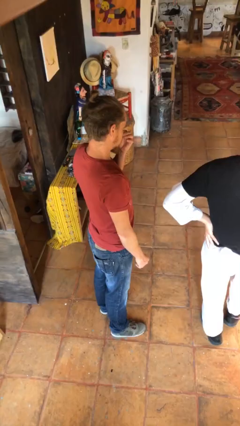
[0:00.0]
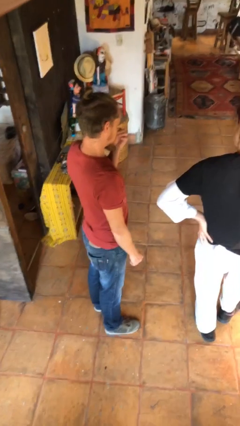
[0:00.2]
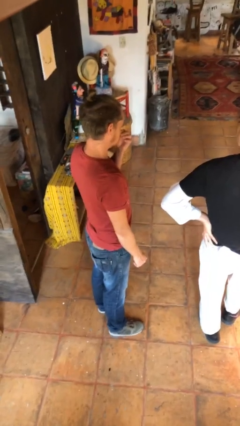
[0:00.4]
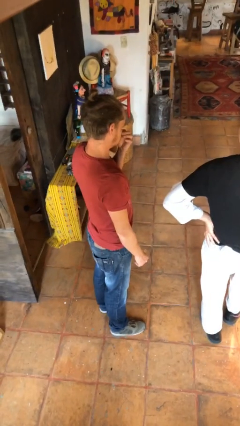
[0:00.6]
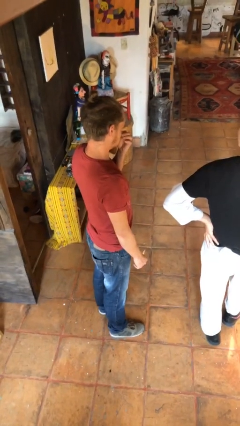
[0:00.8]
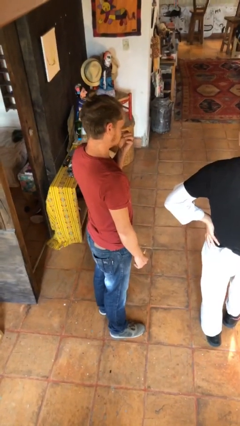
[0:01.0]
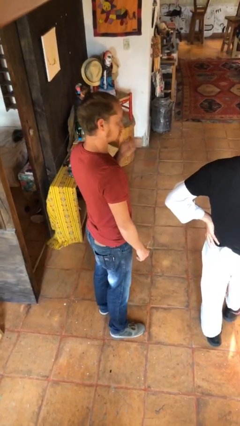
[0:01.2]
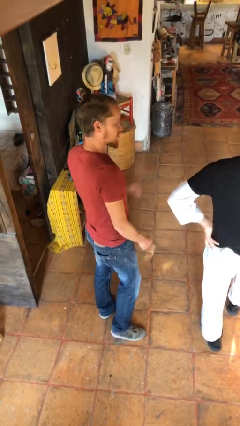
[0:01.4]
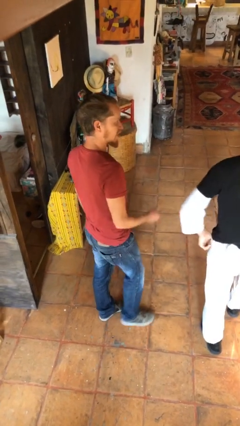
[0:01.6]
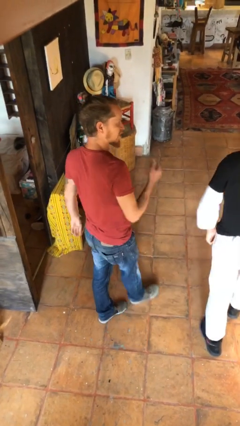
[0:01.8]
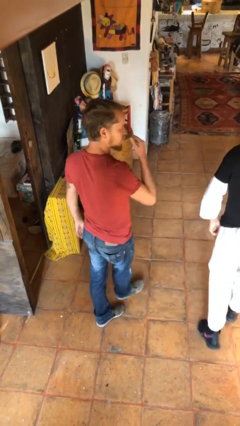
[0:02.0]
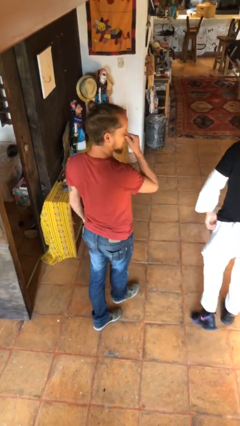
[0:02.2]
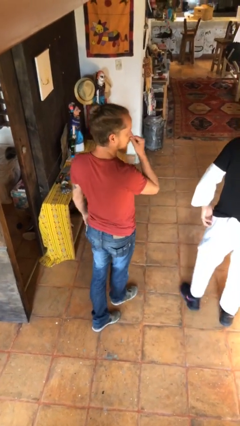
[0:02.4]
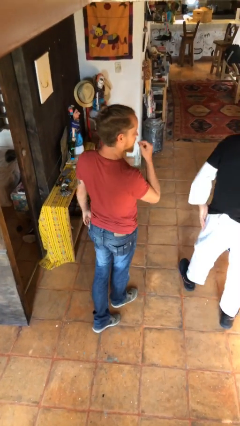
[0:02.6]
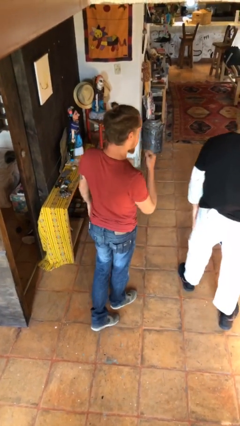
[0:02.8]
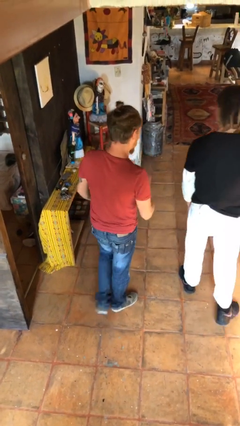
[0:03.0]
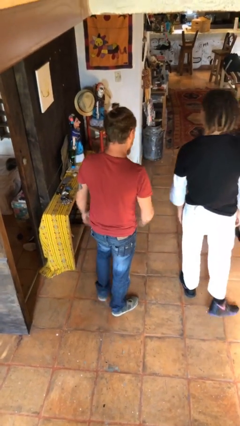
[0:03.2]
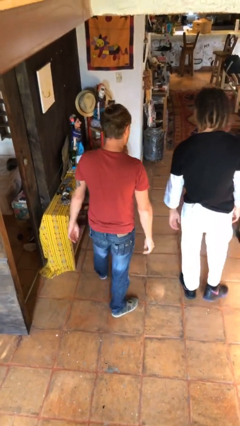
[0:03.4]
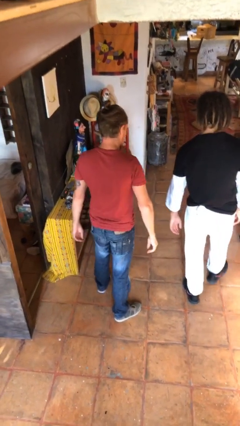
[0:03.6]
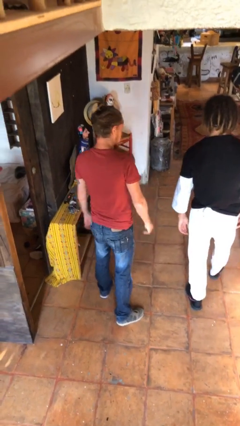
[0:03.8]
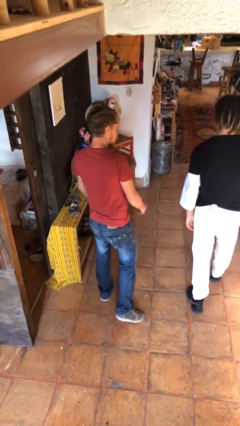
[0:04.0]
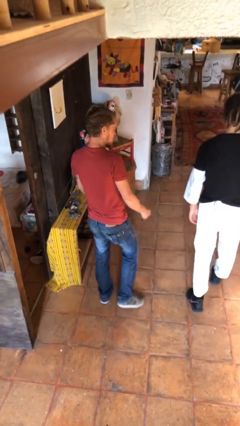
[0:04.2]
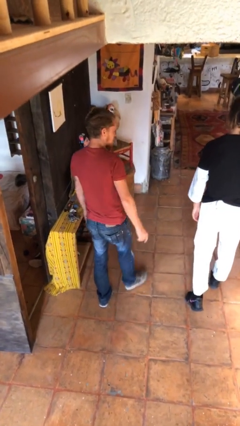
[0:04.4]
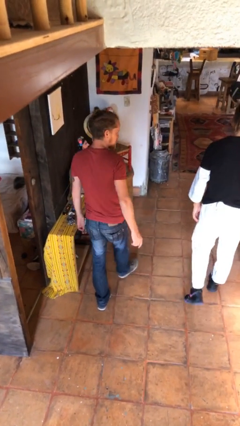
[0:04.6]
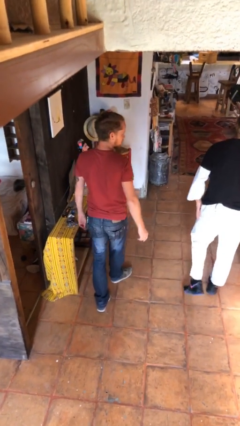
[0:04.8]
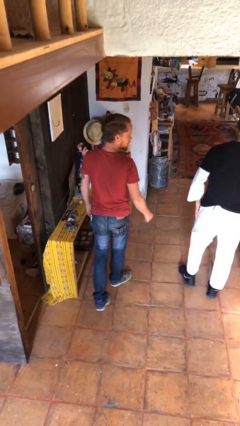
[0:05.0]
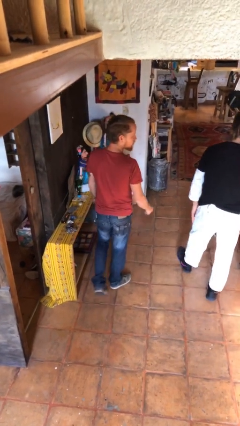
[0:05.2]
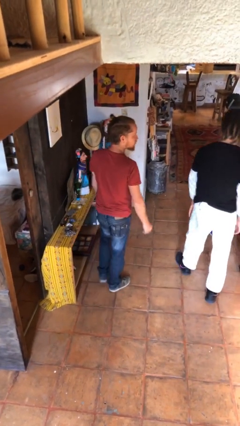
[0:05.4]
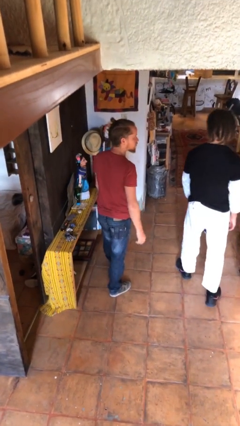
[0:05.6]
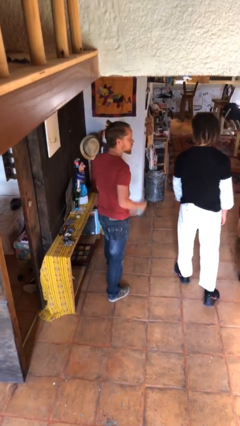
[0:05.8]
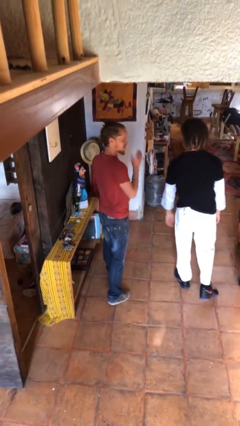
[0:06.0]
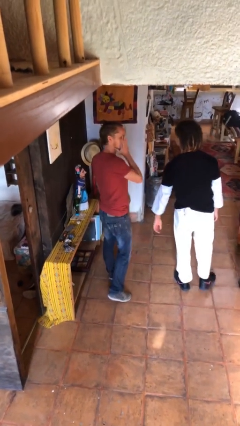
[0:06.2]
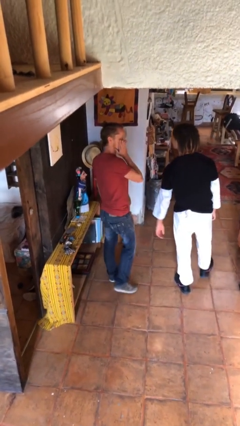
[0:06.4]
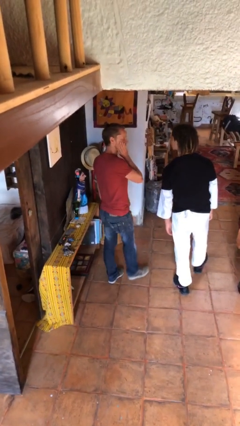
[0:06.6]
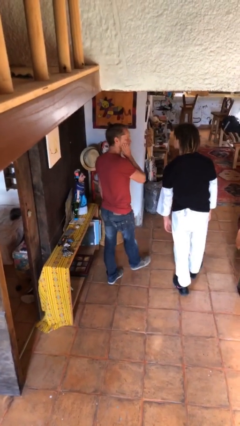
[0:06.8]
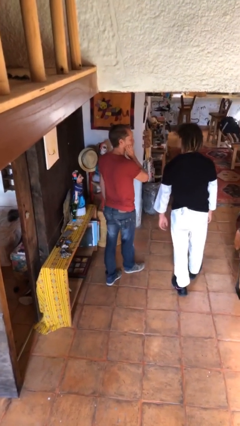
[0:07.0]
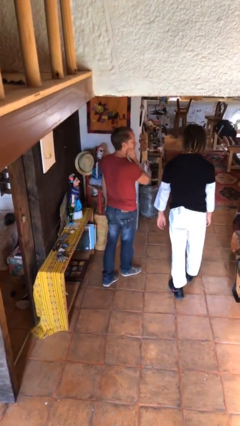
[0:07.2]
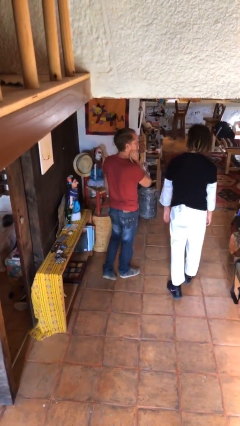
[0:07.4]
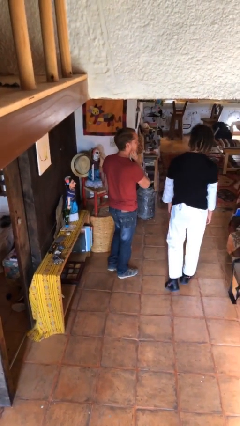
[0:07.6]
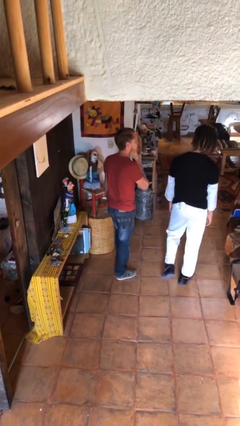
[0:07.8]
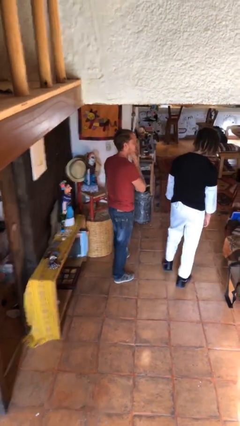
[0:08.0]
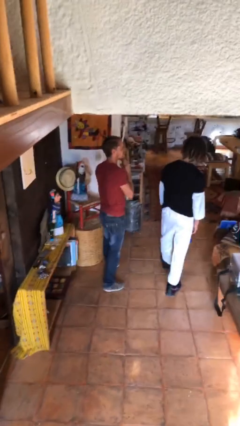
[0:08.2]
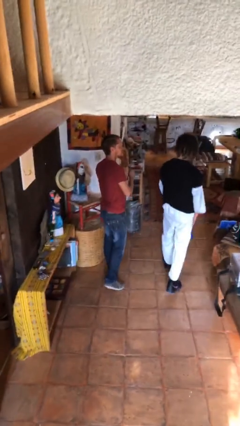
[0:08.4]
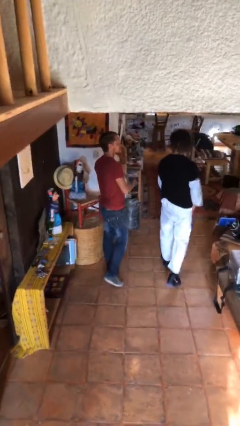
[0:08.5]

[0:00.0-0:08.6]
person talks to person

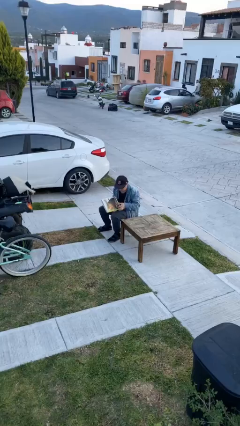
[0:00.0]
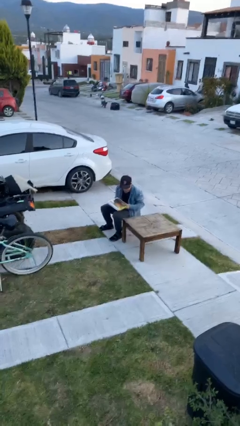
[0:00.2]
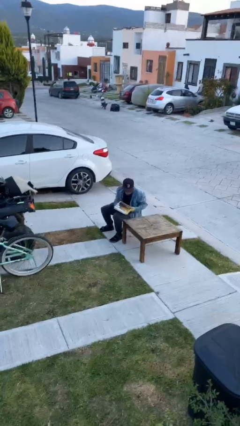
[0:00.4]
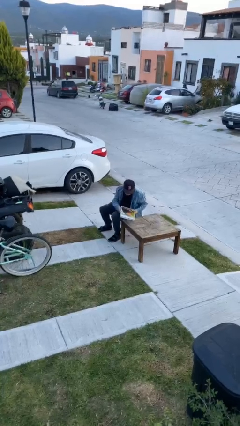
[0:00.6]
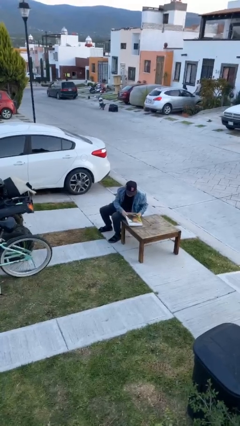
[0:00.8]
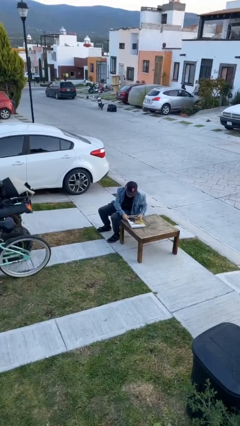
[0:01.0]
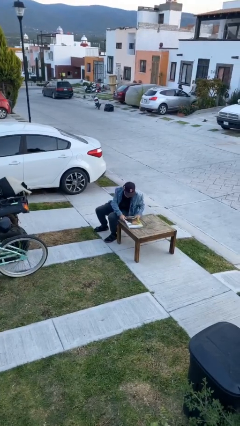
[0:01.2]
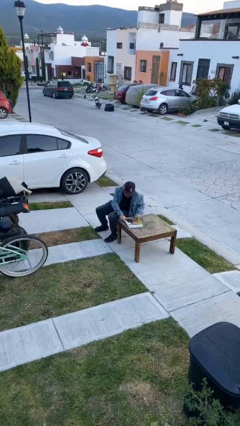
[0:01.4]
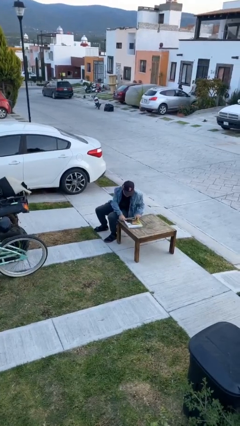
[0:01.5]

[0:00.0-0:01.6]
person puts down object on table

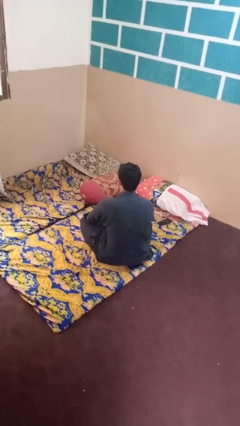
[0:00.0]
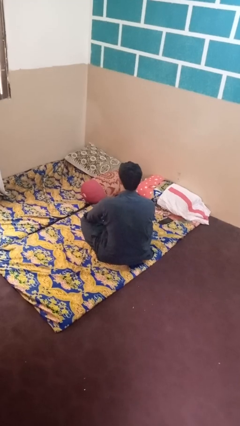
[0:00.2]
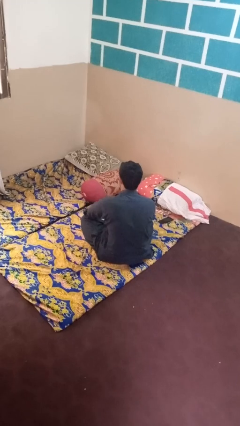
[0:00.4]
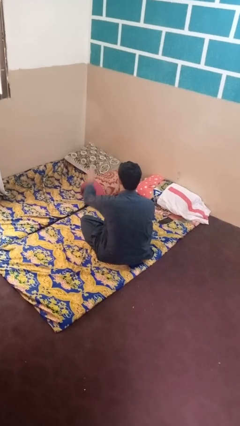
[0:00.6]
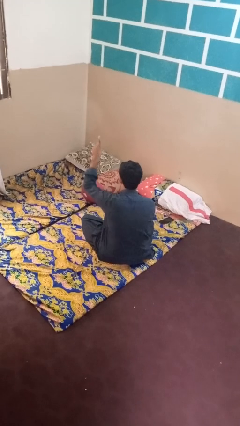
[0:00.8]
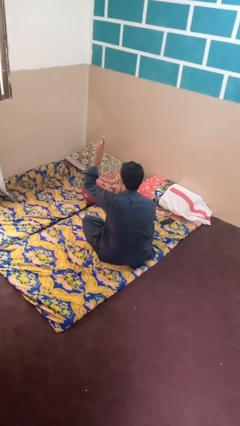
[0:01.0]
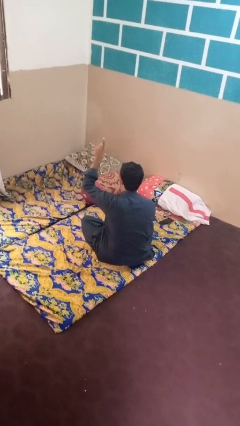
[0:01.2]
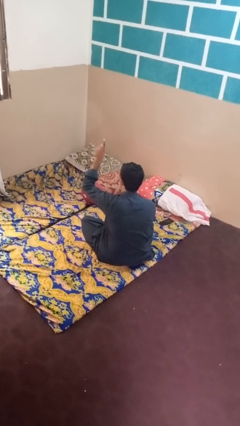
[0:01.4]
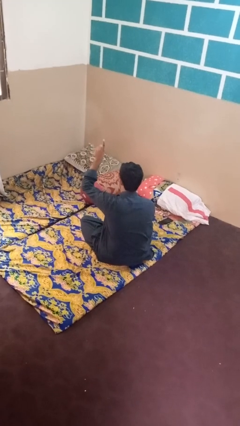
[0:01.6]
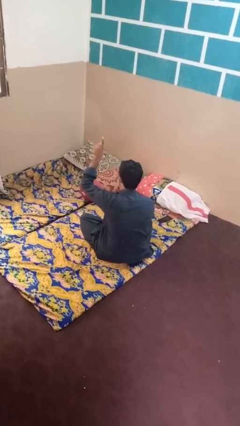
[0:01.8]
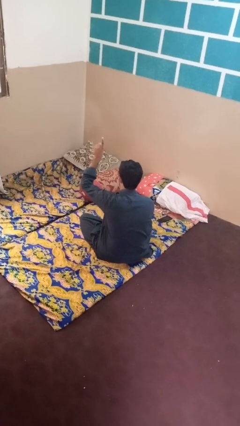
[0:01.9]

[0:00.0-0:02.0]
person gestures hang loose

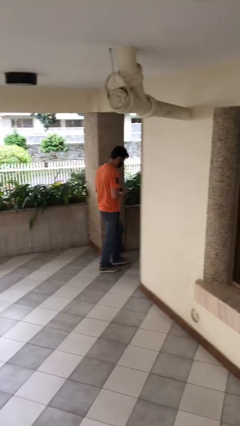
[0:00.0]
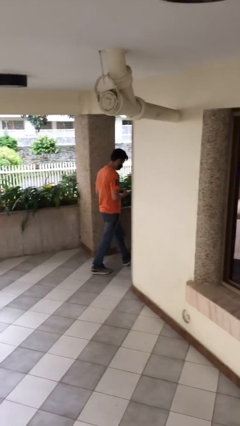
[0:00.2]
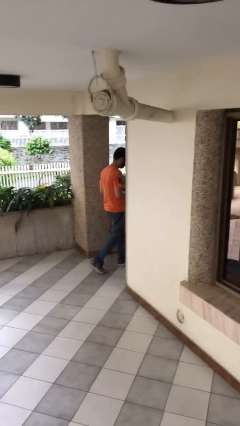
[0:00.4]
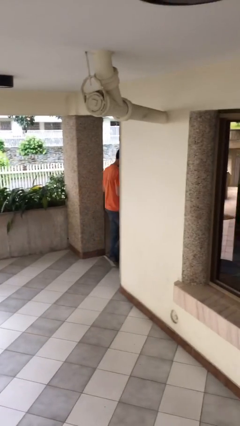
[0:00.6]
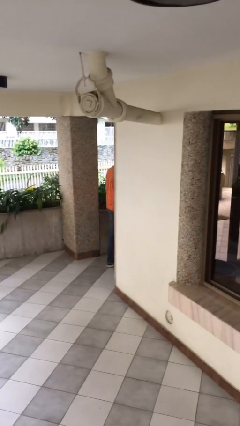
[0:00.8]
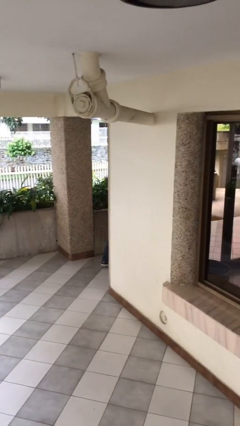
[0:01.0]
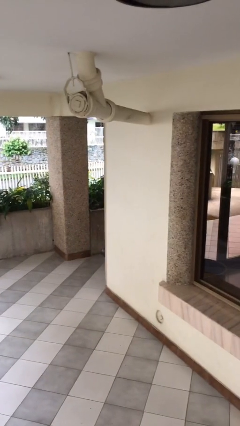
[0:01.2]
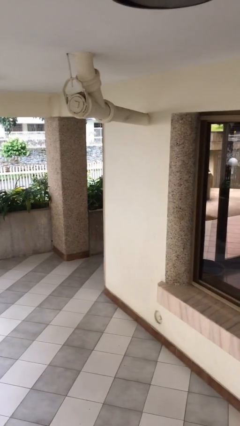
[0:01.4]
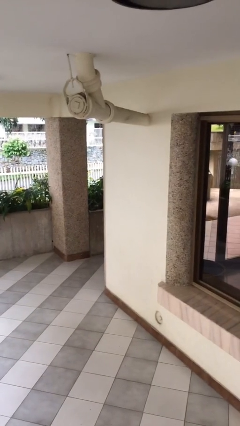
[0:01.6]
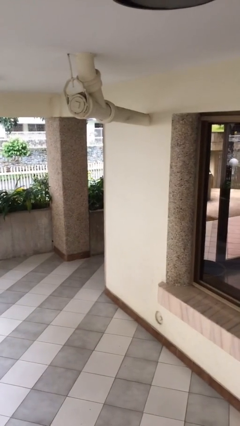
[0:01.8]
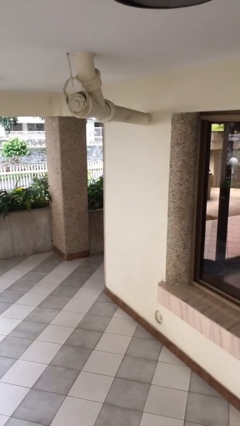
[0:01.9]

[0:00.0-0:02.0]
person exits scene through structure

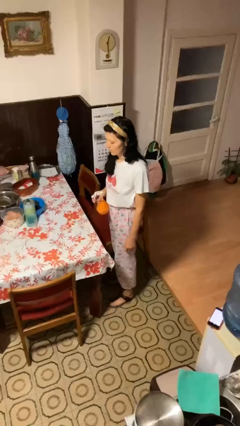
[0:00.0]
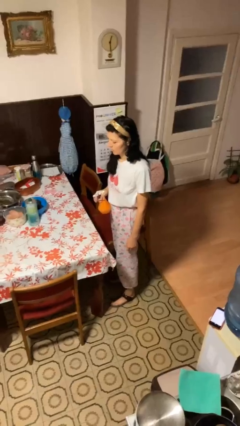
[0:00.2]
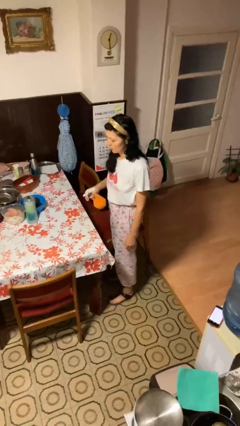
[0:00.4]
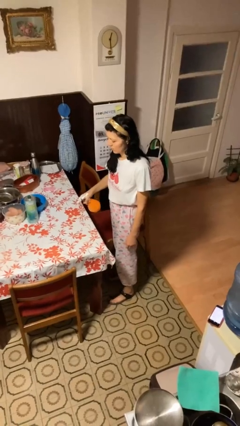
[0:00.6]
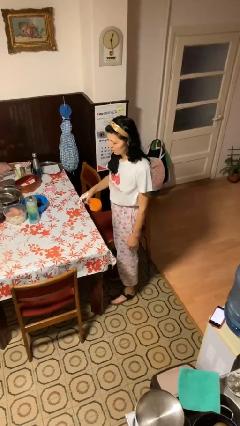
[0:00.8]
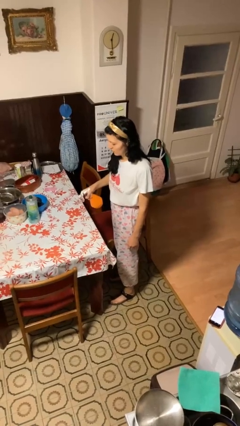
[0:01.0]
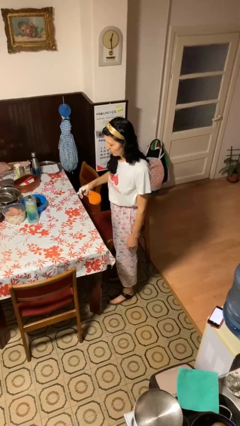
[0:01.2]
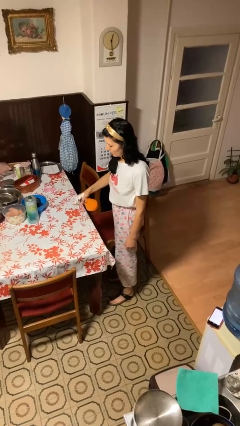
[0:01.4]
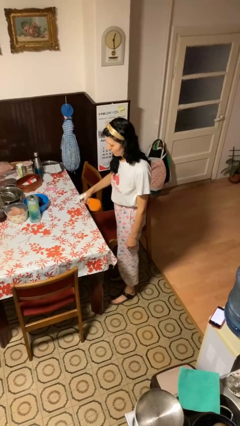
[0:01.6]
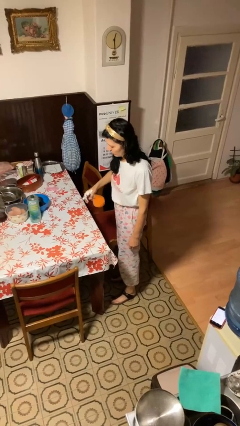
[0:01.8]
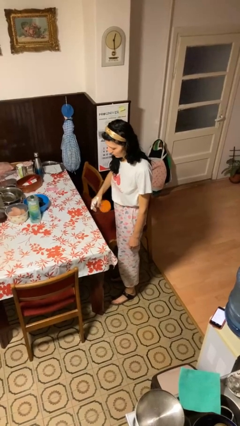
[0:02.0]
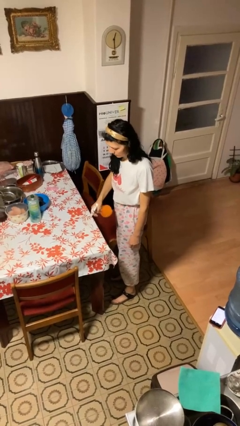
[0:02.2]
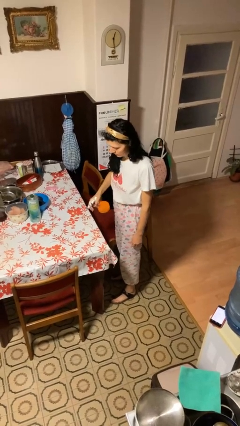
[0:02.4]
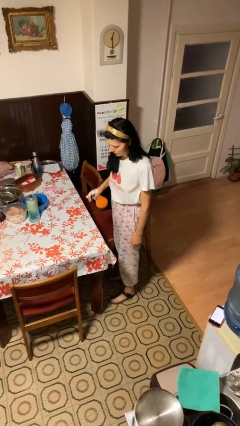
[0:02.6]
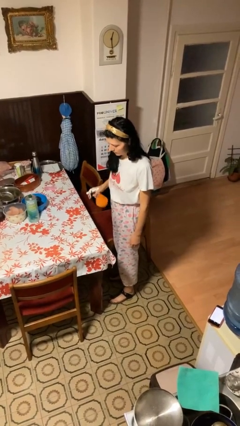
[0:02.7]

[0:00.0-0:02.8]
person sprays from bottle

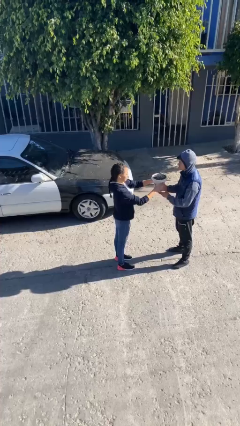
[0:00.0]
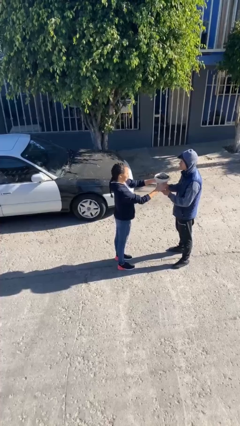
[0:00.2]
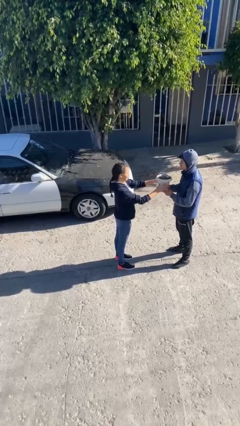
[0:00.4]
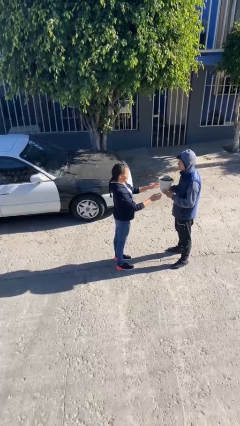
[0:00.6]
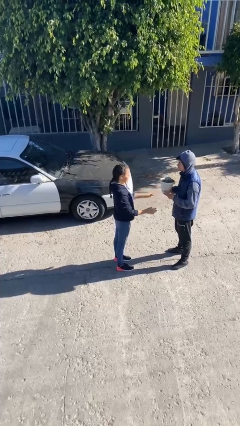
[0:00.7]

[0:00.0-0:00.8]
person transfers object to person
